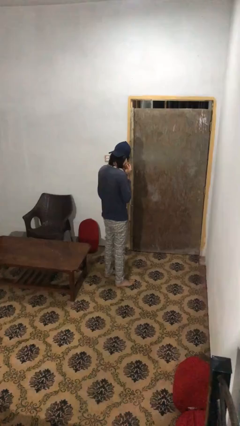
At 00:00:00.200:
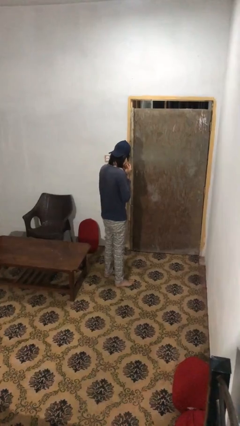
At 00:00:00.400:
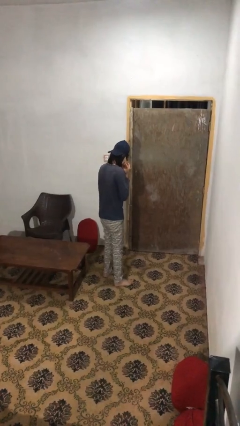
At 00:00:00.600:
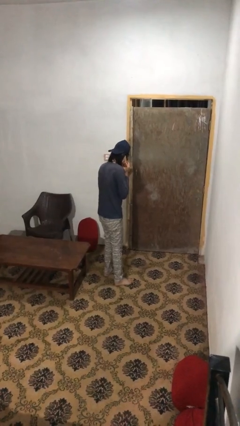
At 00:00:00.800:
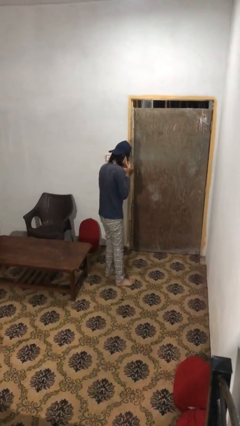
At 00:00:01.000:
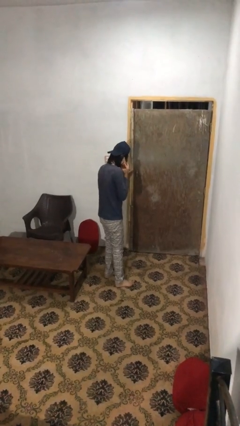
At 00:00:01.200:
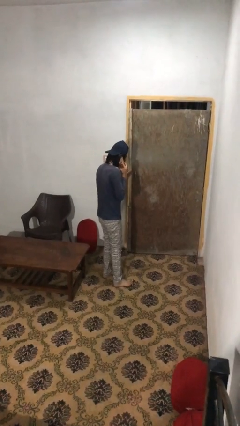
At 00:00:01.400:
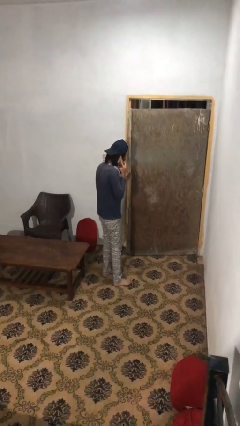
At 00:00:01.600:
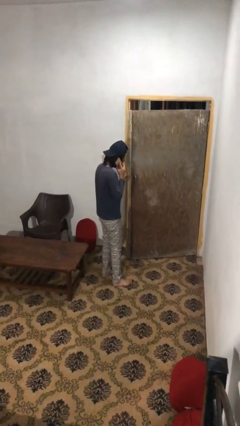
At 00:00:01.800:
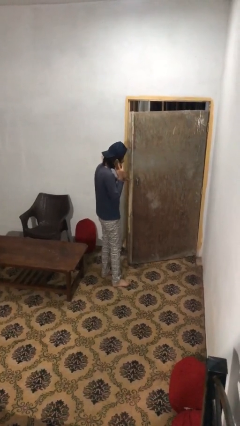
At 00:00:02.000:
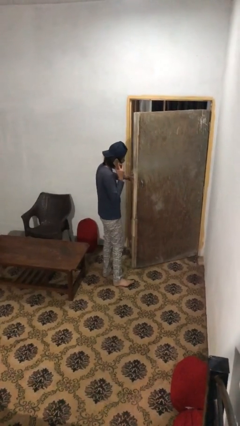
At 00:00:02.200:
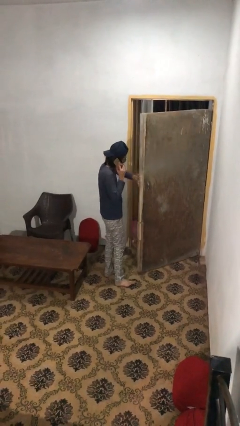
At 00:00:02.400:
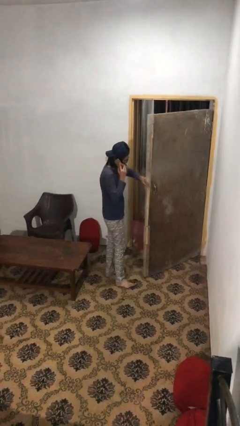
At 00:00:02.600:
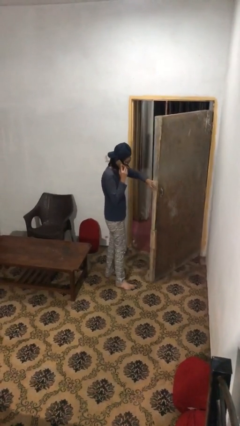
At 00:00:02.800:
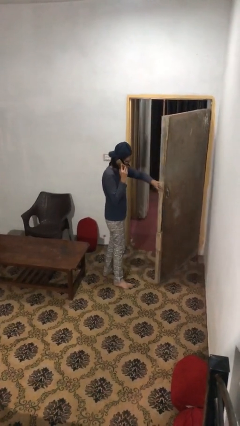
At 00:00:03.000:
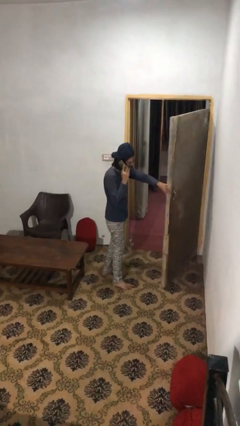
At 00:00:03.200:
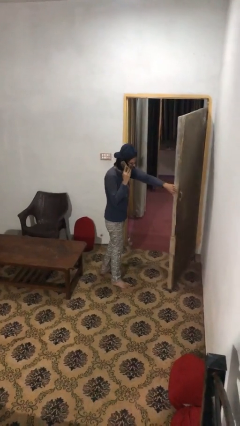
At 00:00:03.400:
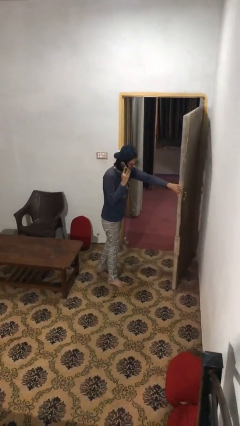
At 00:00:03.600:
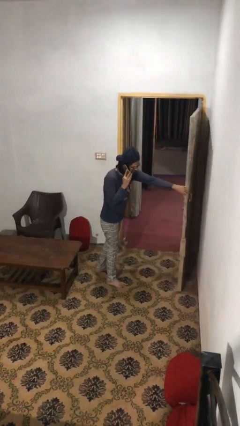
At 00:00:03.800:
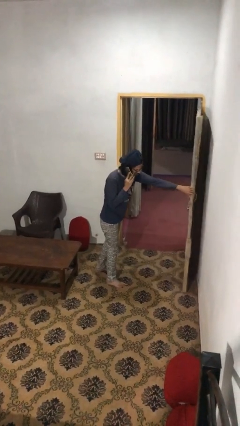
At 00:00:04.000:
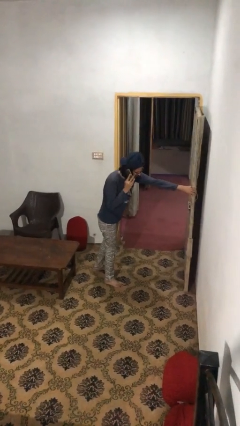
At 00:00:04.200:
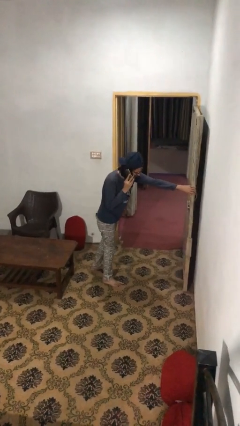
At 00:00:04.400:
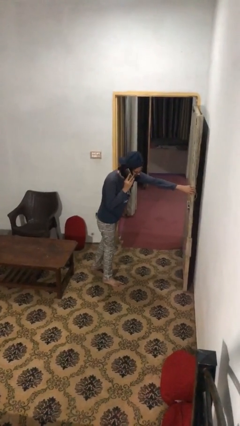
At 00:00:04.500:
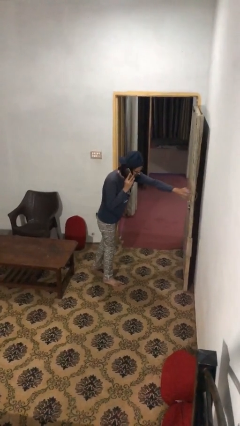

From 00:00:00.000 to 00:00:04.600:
person opens facility door

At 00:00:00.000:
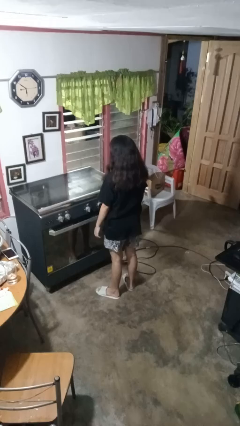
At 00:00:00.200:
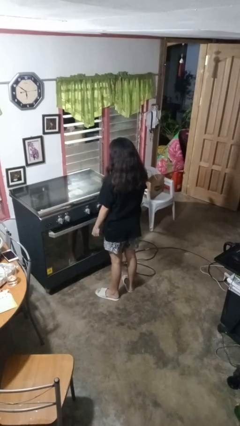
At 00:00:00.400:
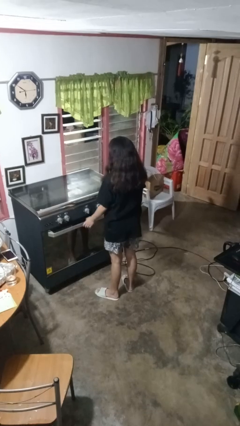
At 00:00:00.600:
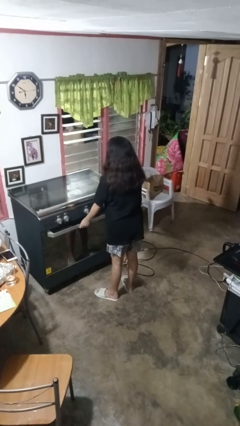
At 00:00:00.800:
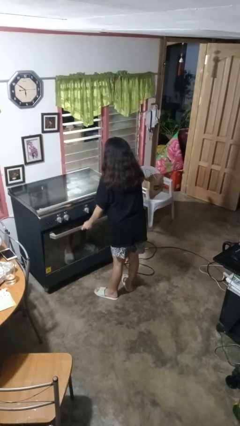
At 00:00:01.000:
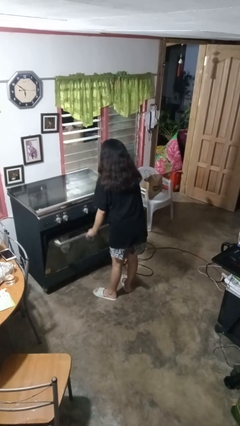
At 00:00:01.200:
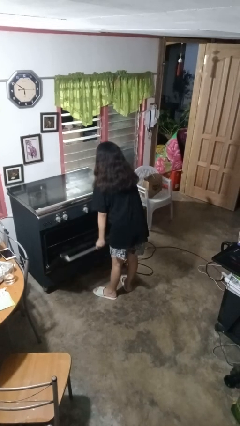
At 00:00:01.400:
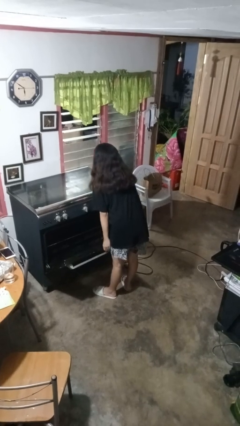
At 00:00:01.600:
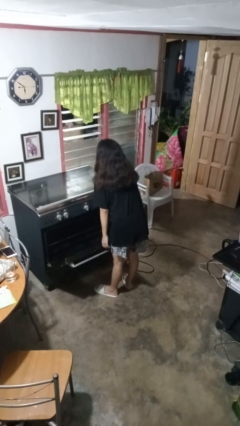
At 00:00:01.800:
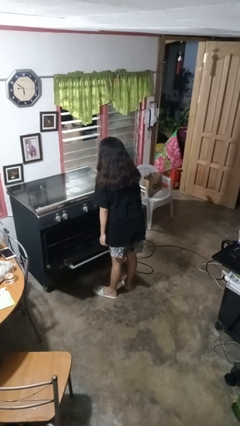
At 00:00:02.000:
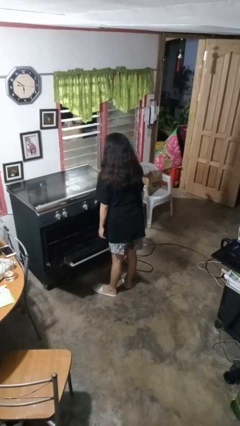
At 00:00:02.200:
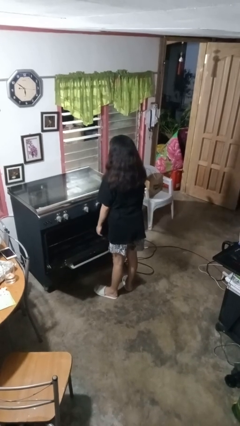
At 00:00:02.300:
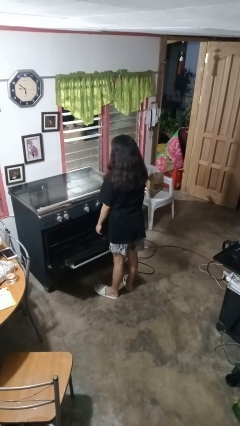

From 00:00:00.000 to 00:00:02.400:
person opens oven door

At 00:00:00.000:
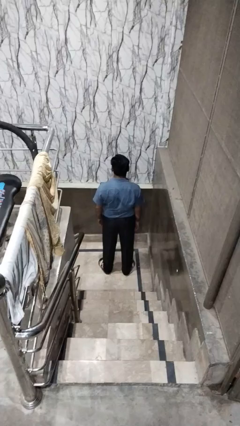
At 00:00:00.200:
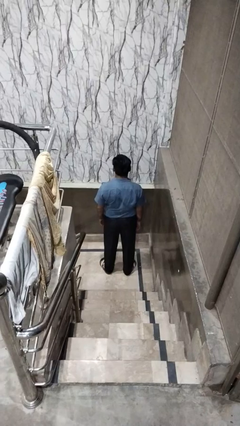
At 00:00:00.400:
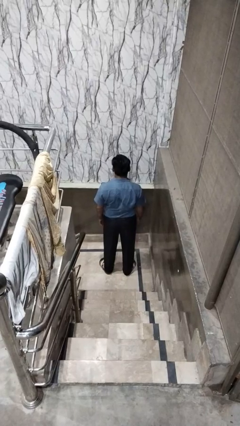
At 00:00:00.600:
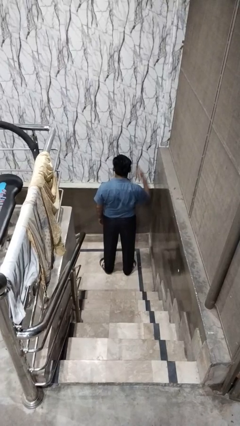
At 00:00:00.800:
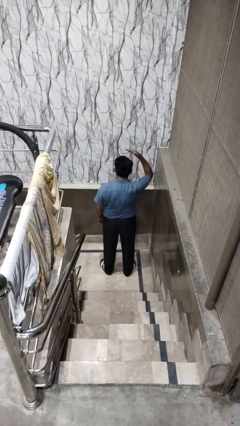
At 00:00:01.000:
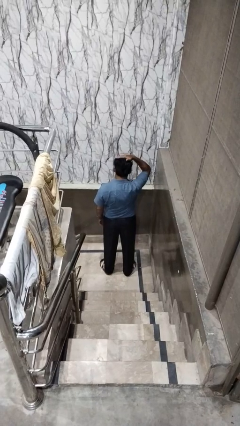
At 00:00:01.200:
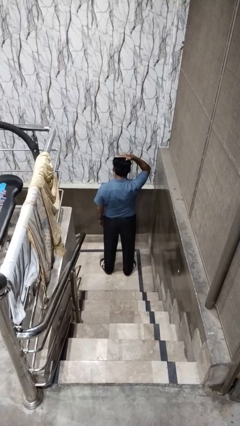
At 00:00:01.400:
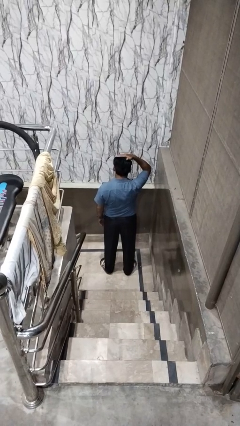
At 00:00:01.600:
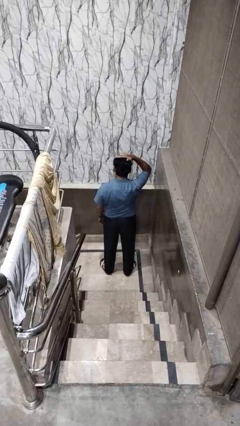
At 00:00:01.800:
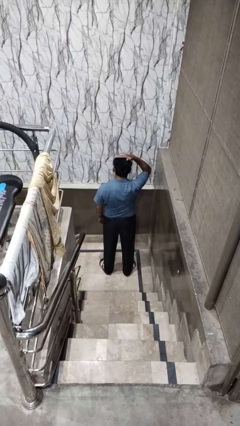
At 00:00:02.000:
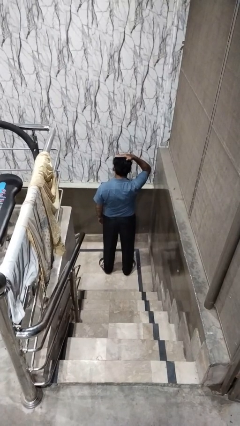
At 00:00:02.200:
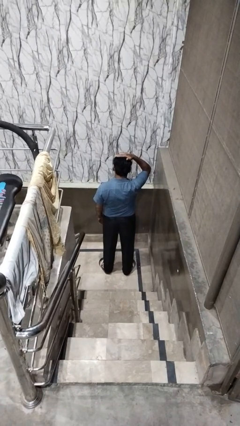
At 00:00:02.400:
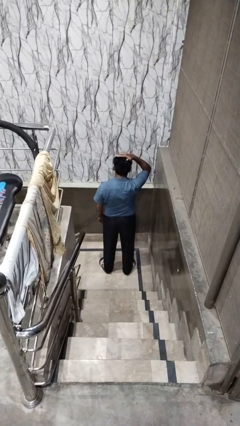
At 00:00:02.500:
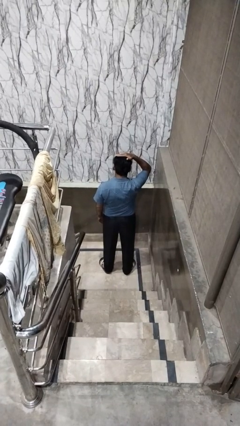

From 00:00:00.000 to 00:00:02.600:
person pats head

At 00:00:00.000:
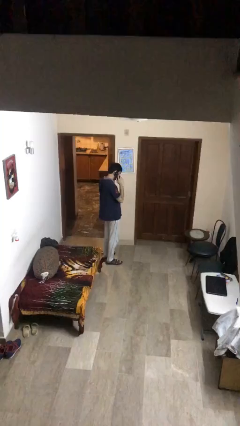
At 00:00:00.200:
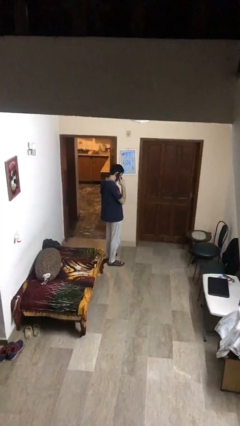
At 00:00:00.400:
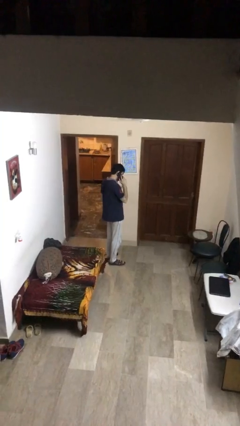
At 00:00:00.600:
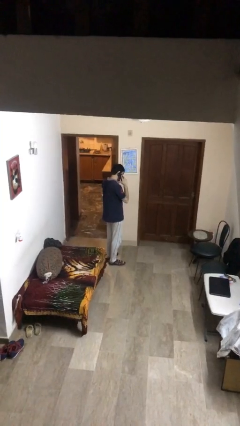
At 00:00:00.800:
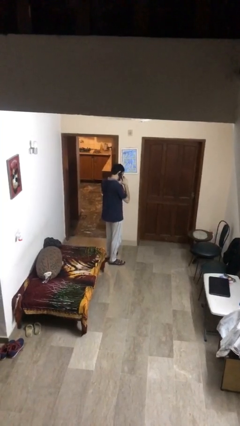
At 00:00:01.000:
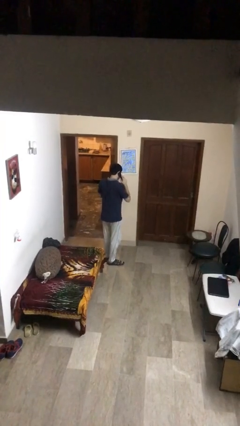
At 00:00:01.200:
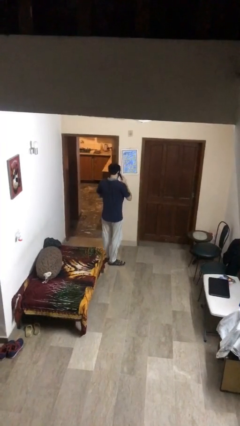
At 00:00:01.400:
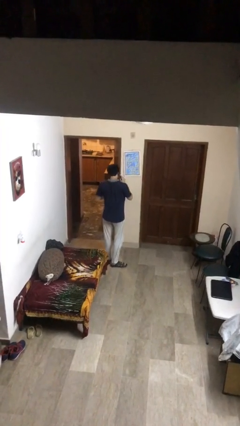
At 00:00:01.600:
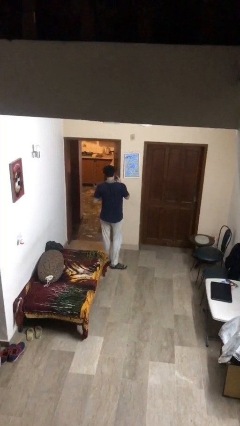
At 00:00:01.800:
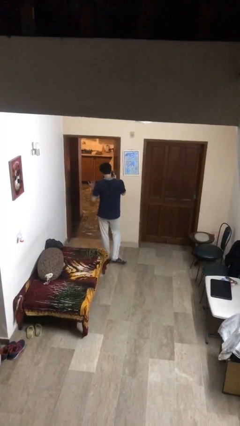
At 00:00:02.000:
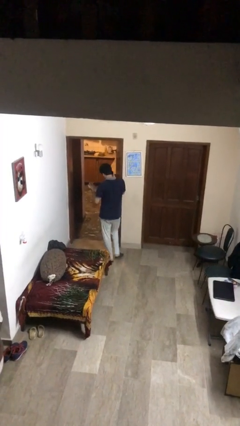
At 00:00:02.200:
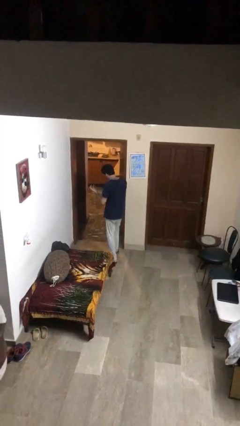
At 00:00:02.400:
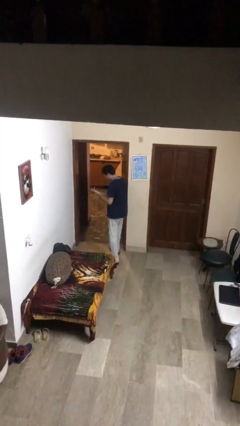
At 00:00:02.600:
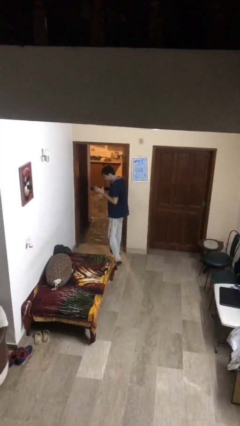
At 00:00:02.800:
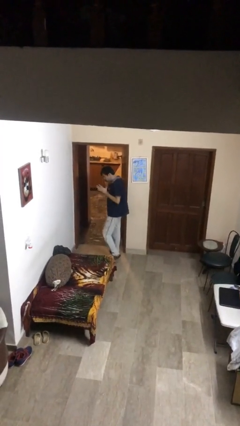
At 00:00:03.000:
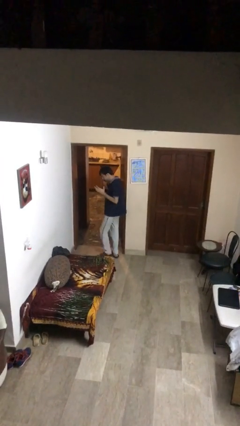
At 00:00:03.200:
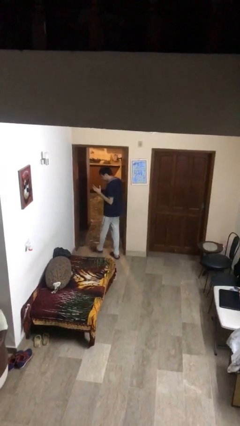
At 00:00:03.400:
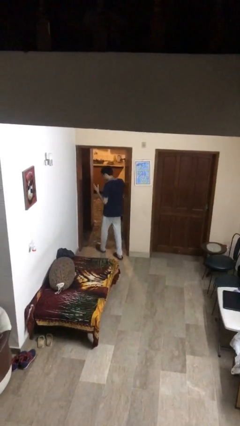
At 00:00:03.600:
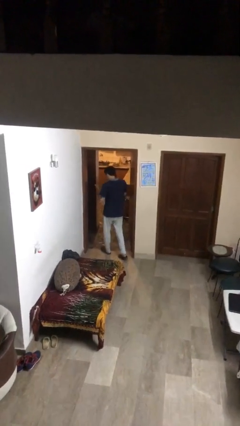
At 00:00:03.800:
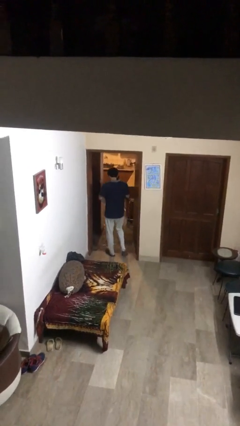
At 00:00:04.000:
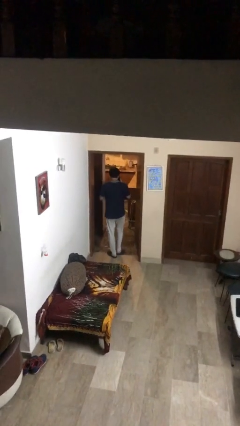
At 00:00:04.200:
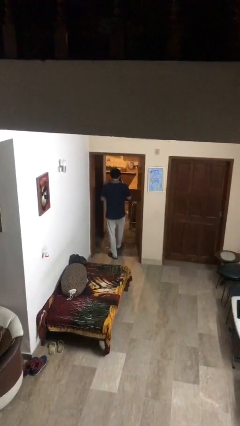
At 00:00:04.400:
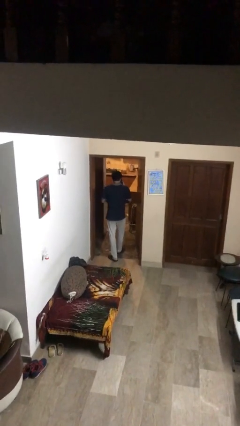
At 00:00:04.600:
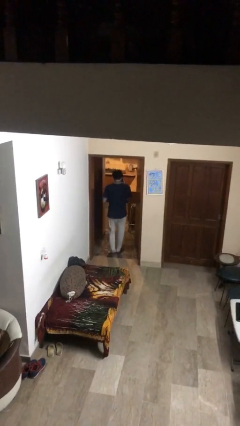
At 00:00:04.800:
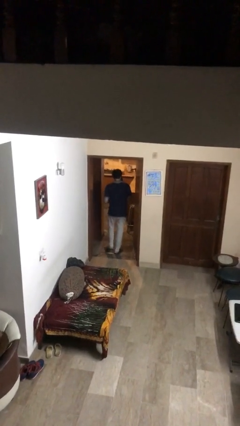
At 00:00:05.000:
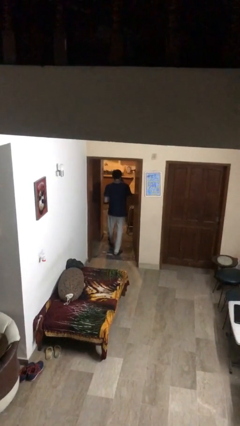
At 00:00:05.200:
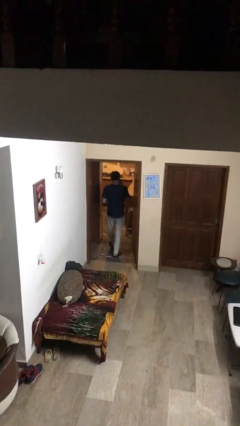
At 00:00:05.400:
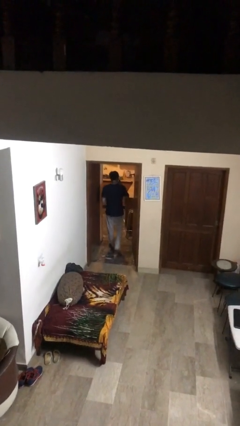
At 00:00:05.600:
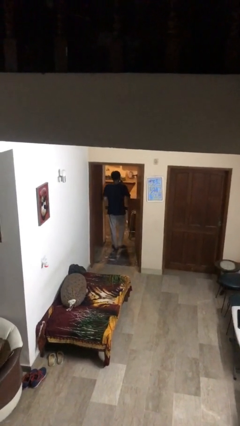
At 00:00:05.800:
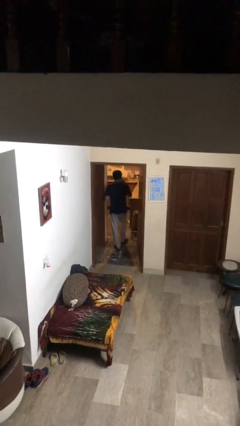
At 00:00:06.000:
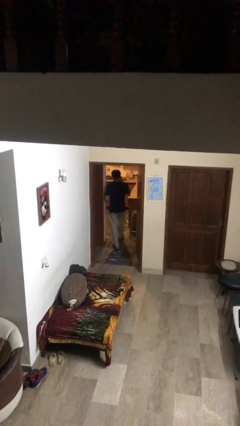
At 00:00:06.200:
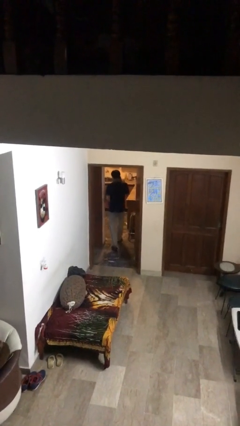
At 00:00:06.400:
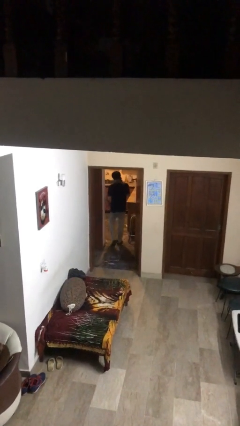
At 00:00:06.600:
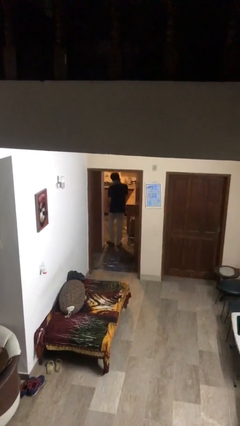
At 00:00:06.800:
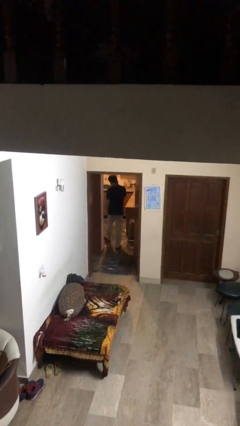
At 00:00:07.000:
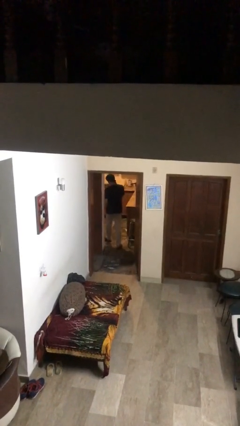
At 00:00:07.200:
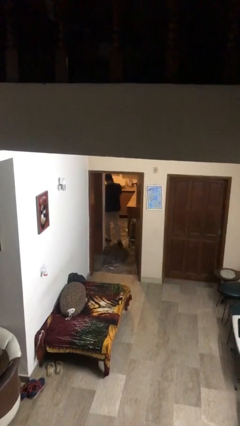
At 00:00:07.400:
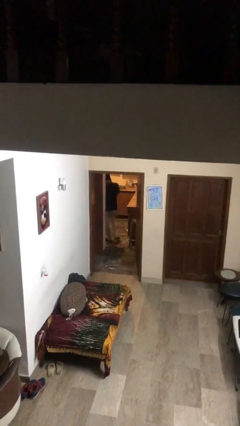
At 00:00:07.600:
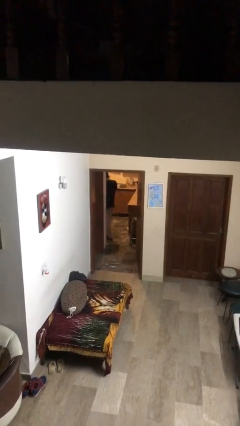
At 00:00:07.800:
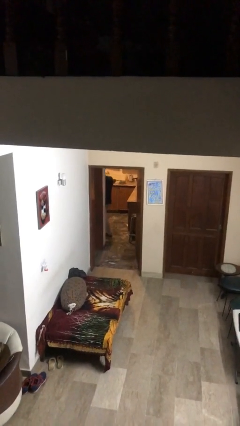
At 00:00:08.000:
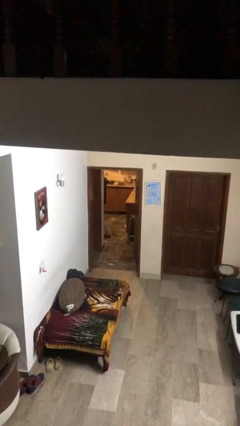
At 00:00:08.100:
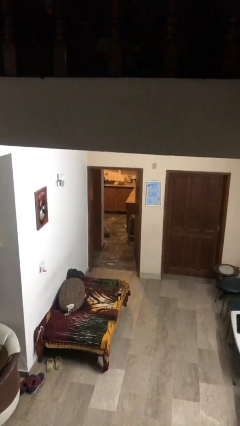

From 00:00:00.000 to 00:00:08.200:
person exits scene through structure
